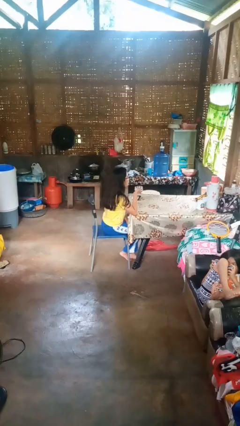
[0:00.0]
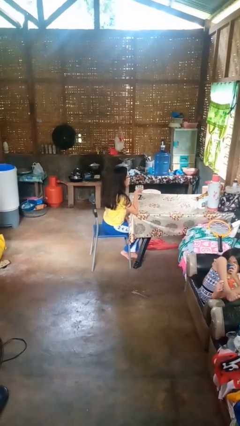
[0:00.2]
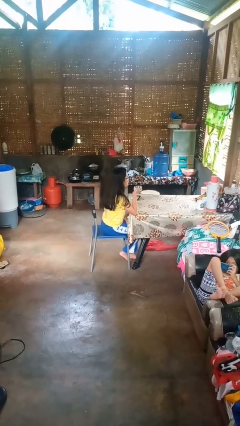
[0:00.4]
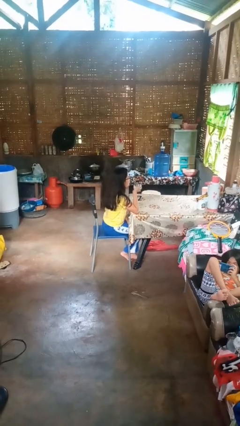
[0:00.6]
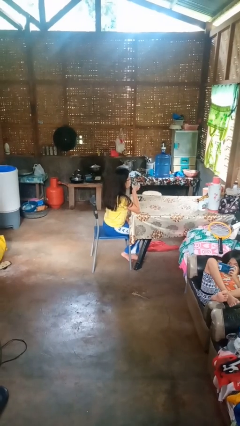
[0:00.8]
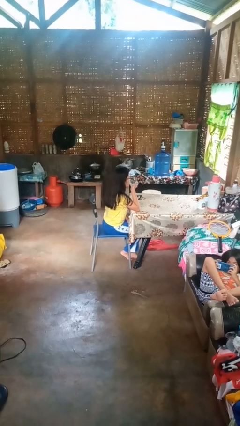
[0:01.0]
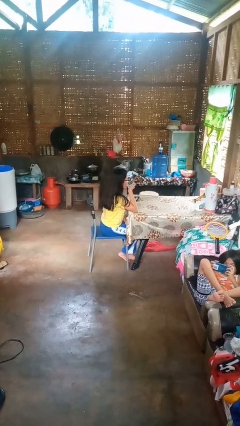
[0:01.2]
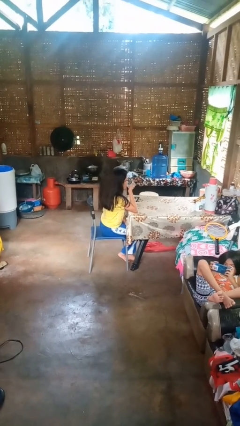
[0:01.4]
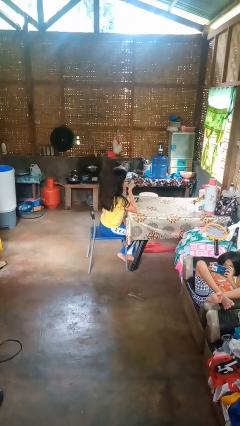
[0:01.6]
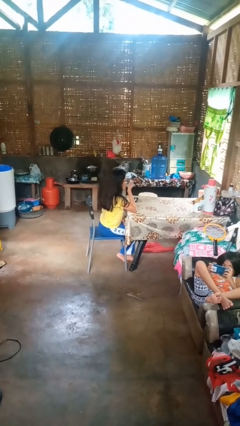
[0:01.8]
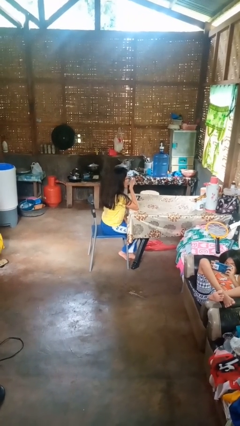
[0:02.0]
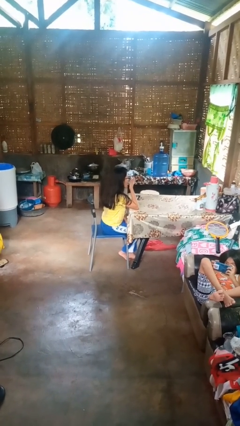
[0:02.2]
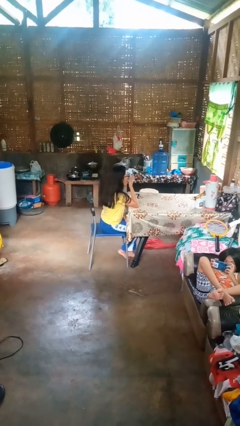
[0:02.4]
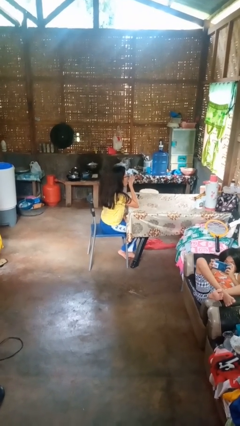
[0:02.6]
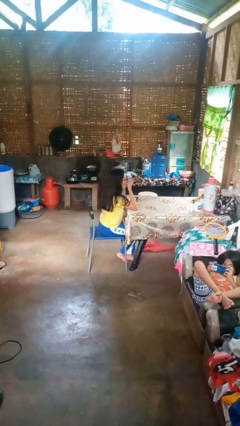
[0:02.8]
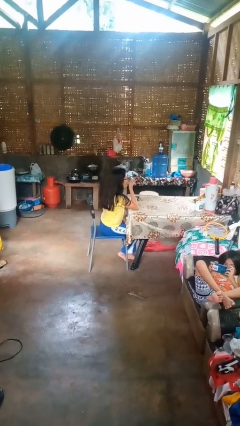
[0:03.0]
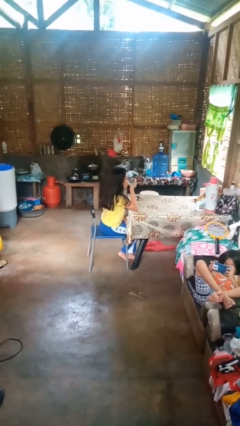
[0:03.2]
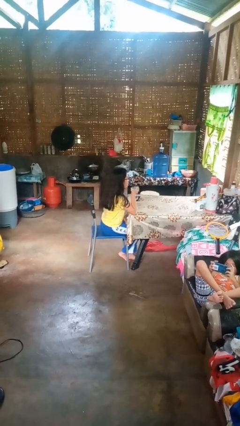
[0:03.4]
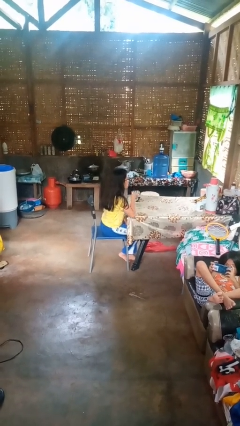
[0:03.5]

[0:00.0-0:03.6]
person drinks from shotglass

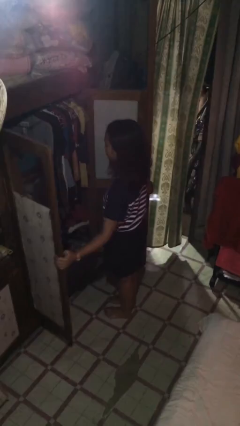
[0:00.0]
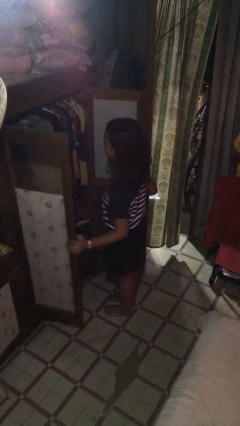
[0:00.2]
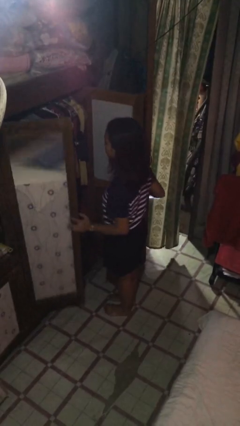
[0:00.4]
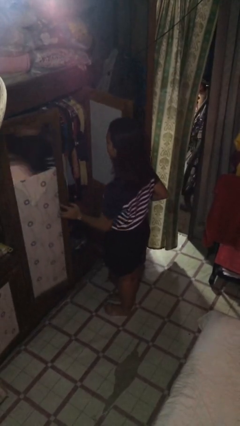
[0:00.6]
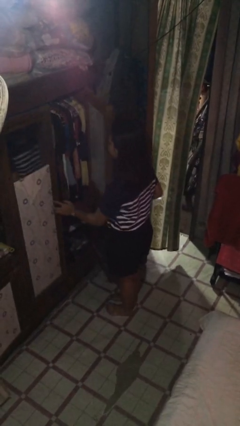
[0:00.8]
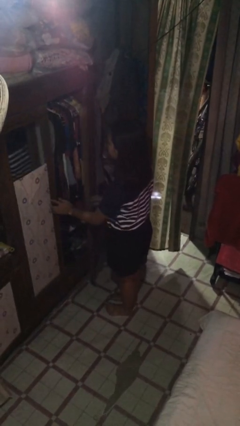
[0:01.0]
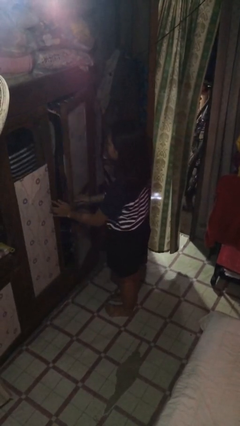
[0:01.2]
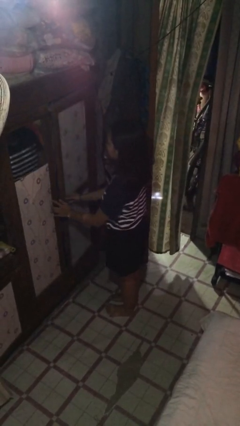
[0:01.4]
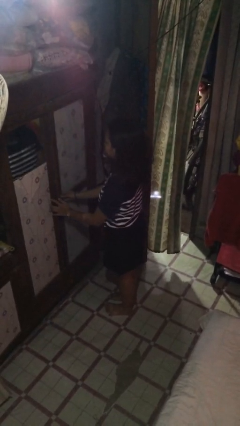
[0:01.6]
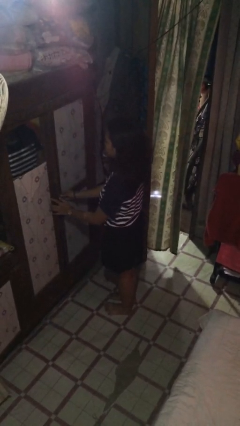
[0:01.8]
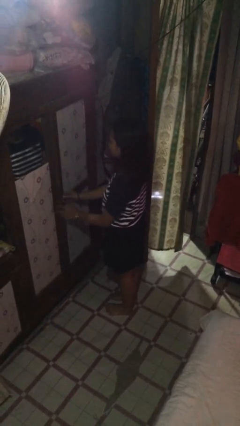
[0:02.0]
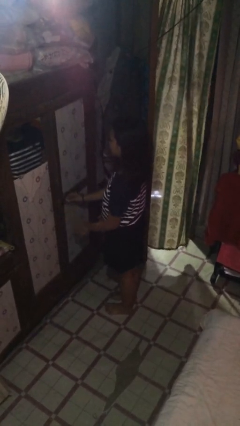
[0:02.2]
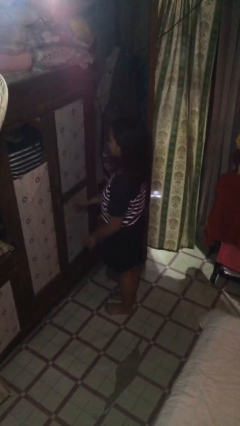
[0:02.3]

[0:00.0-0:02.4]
person closes closet door

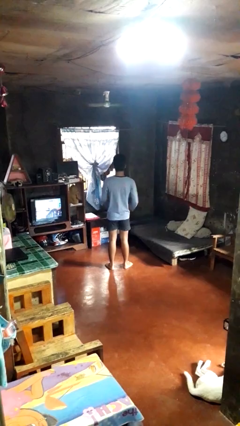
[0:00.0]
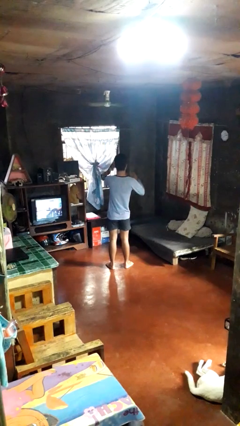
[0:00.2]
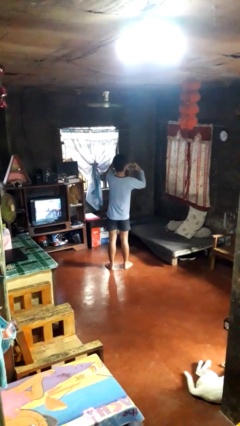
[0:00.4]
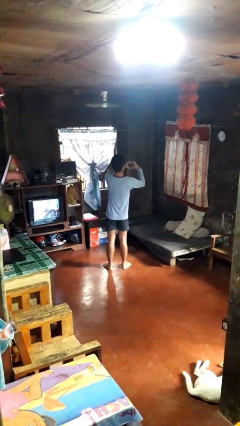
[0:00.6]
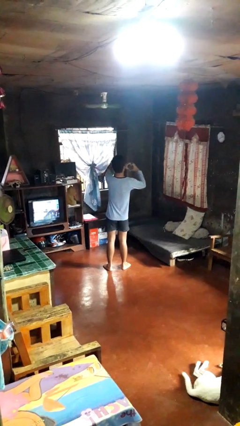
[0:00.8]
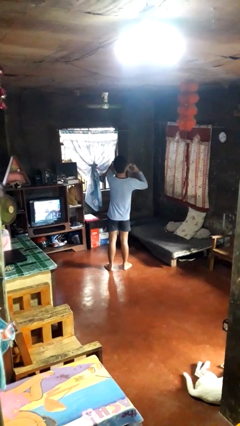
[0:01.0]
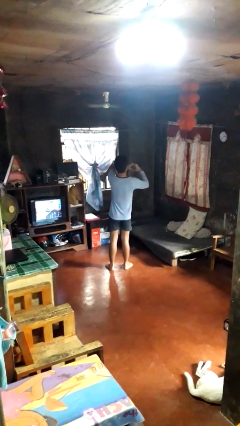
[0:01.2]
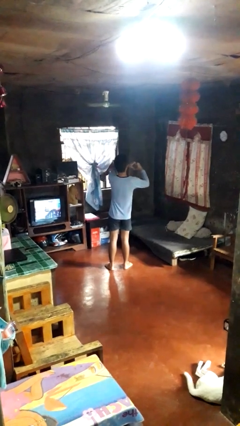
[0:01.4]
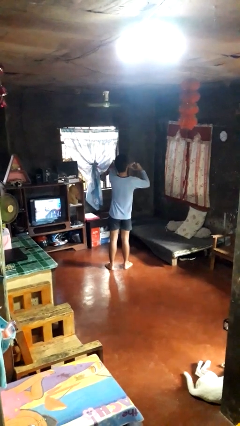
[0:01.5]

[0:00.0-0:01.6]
person gestures heart

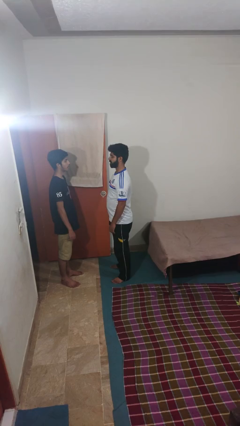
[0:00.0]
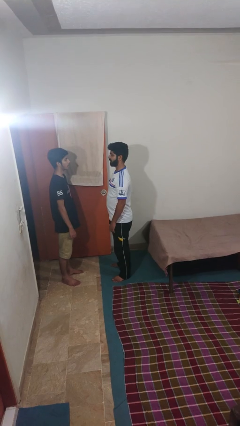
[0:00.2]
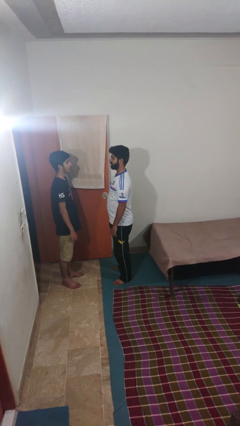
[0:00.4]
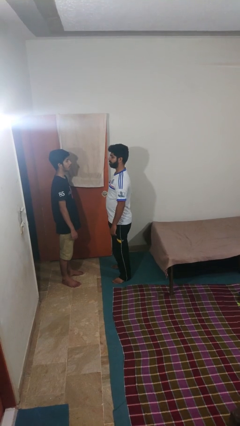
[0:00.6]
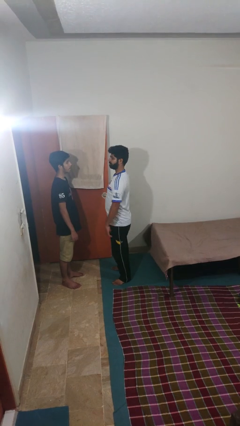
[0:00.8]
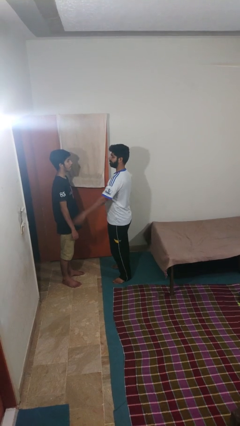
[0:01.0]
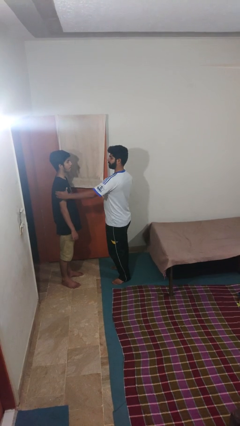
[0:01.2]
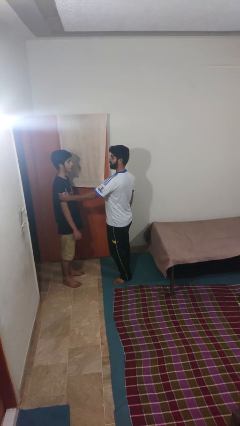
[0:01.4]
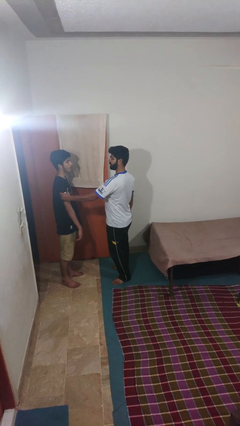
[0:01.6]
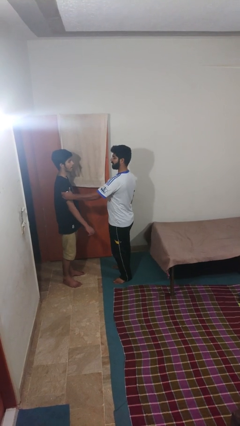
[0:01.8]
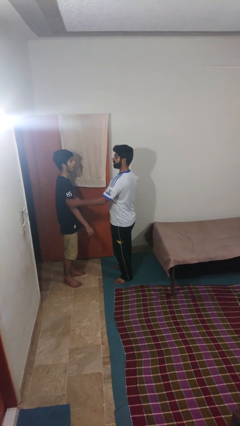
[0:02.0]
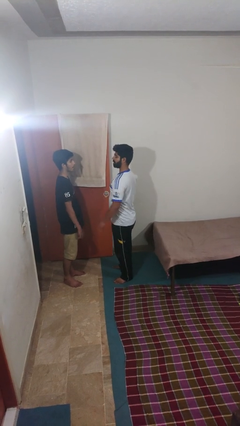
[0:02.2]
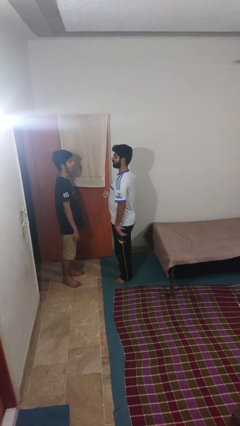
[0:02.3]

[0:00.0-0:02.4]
person grabs person by bicep

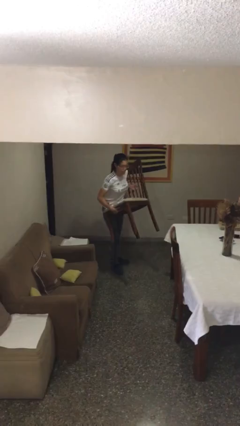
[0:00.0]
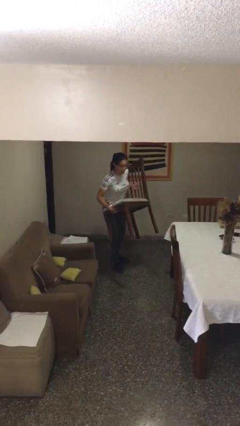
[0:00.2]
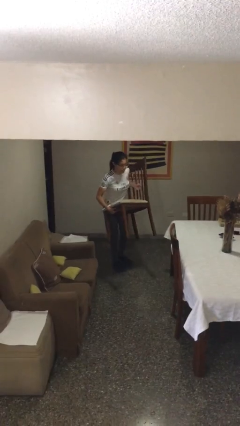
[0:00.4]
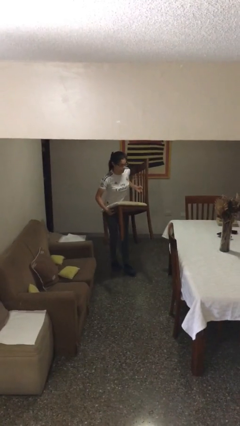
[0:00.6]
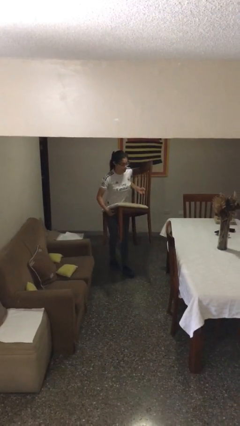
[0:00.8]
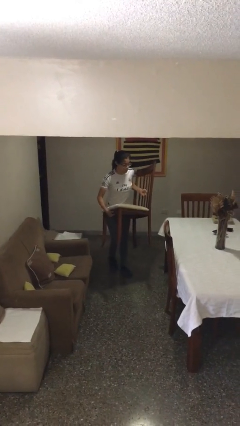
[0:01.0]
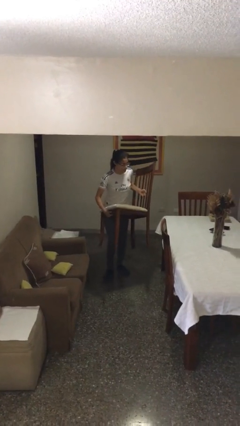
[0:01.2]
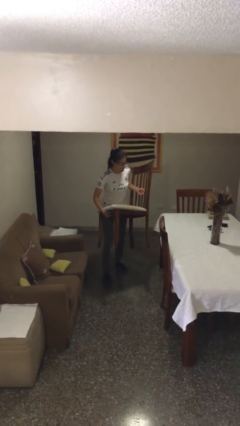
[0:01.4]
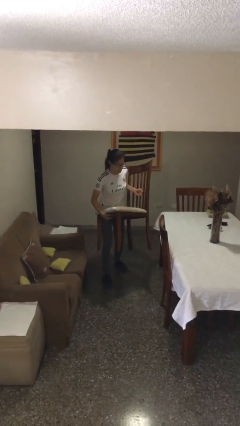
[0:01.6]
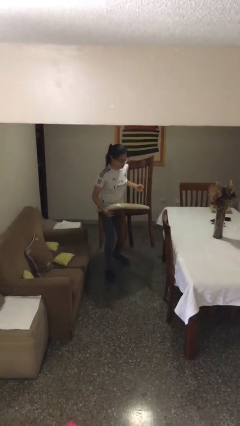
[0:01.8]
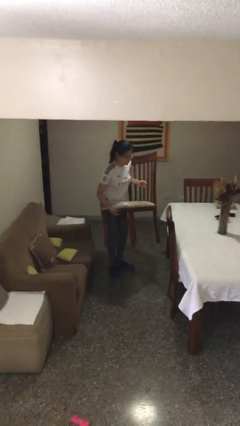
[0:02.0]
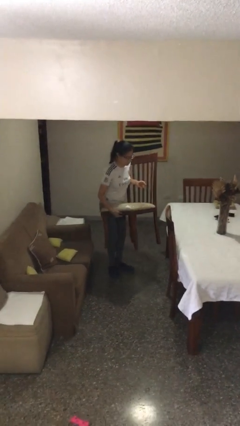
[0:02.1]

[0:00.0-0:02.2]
person carries heavy object

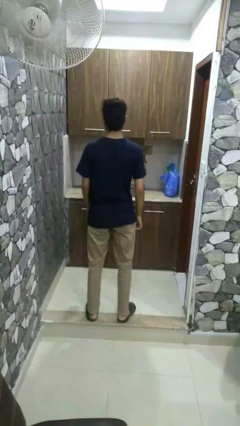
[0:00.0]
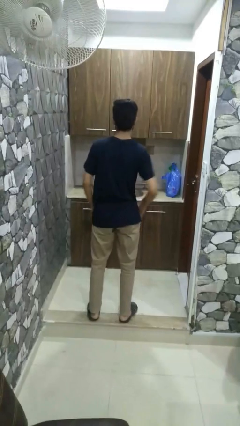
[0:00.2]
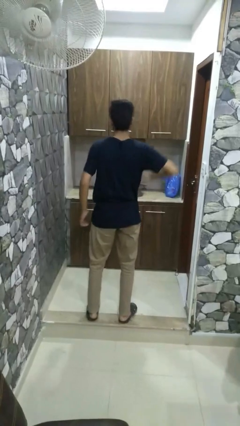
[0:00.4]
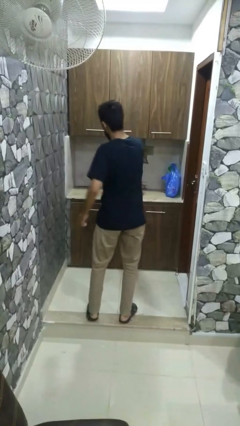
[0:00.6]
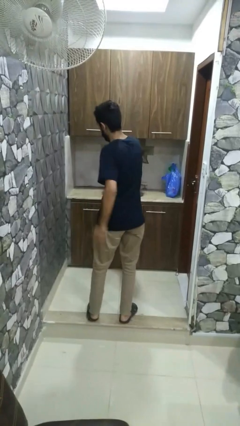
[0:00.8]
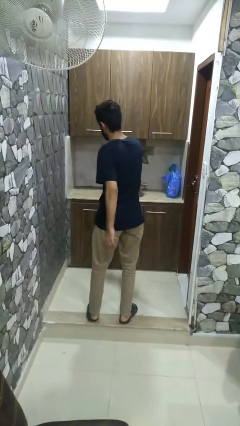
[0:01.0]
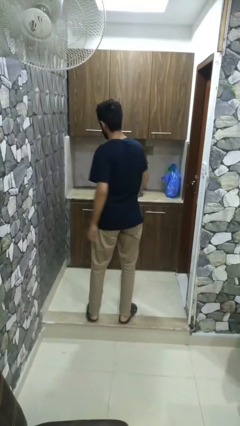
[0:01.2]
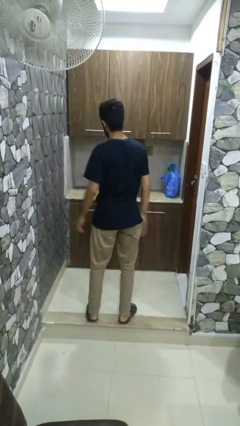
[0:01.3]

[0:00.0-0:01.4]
person karate chop

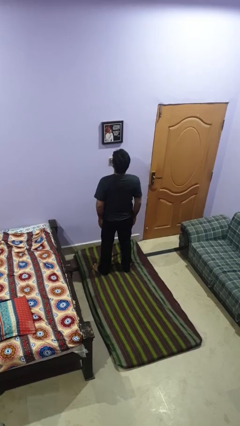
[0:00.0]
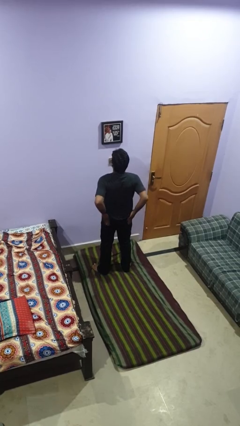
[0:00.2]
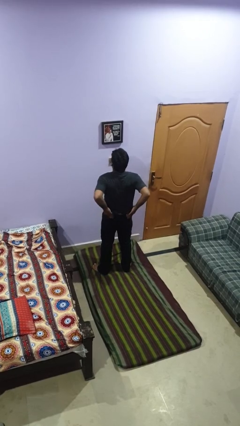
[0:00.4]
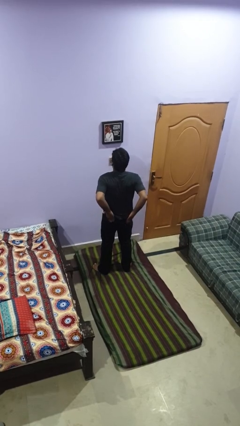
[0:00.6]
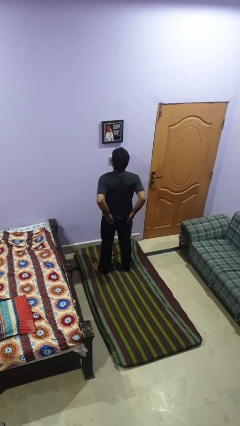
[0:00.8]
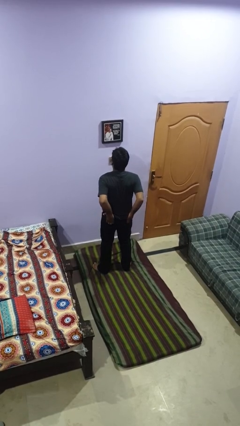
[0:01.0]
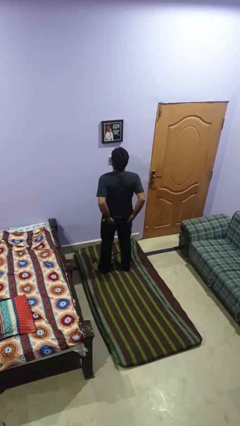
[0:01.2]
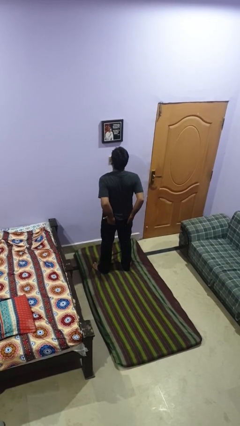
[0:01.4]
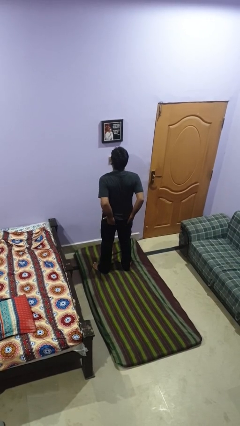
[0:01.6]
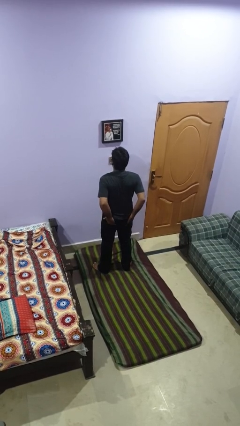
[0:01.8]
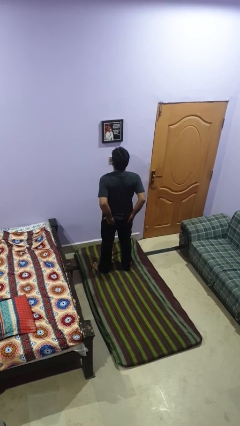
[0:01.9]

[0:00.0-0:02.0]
person puts hands in back pockets

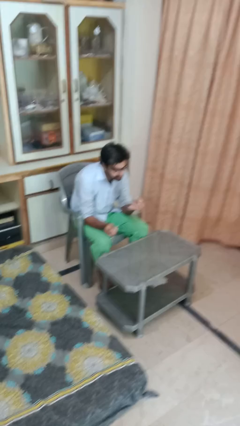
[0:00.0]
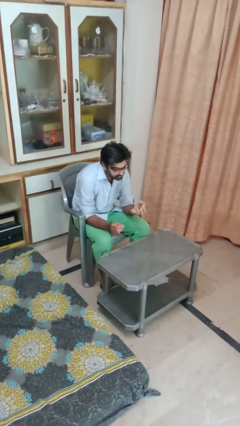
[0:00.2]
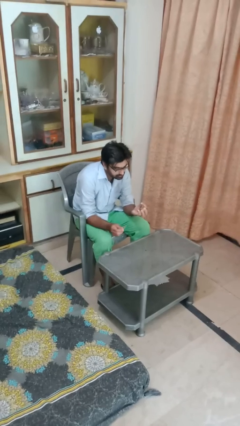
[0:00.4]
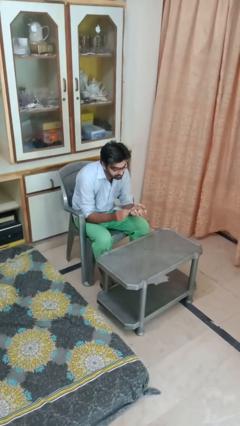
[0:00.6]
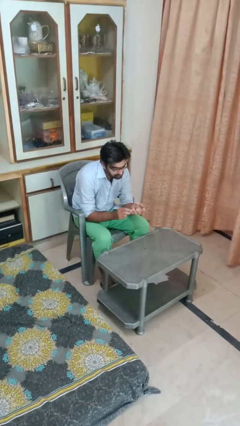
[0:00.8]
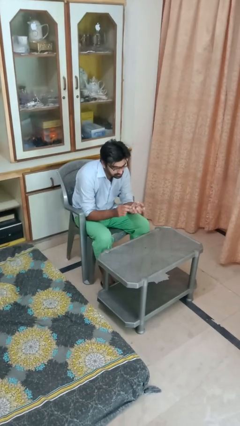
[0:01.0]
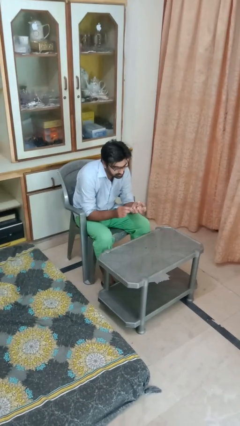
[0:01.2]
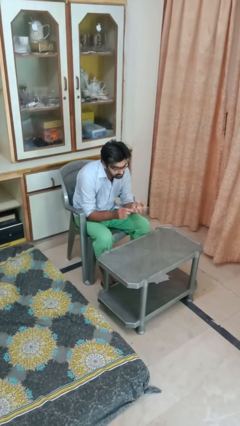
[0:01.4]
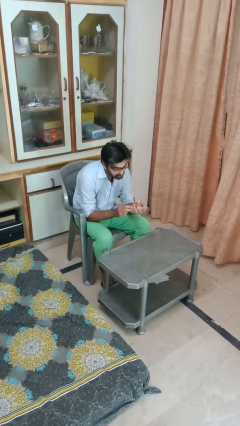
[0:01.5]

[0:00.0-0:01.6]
person files fingernails
